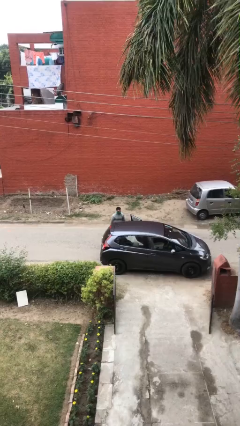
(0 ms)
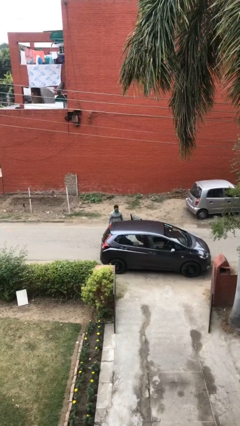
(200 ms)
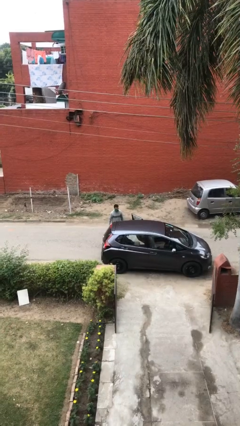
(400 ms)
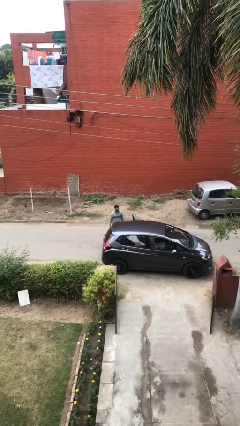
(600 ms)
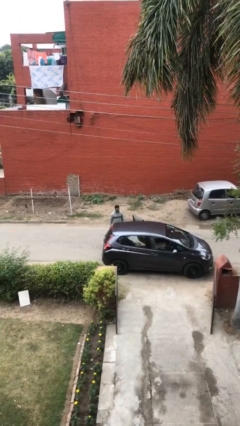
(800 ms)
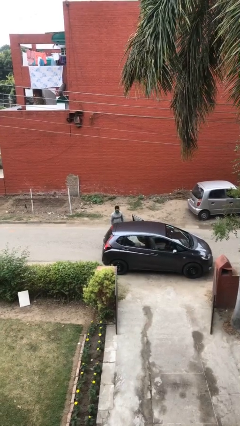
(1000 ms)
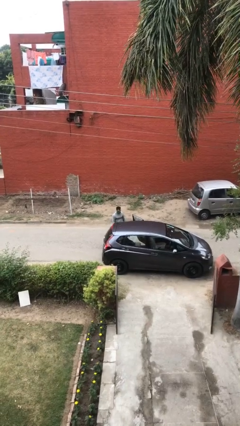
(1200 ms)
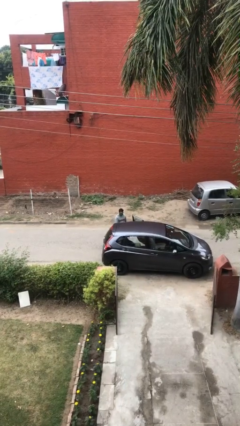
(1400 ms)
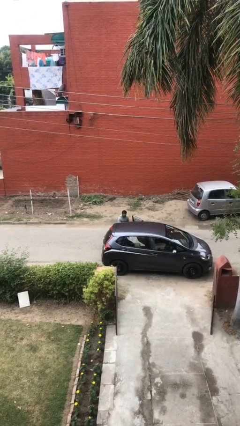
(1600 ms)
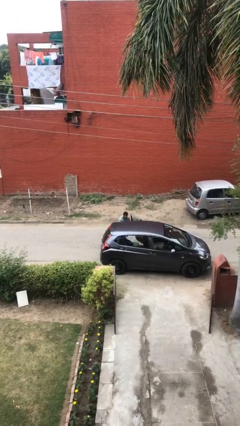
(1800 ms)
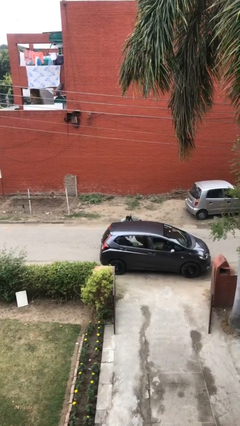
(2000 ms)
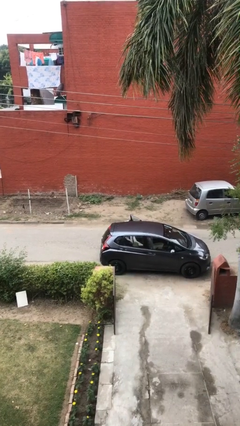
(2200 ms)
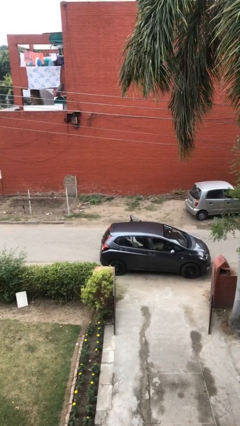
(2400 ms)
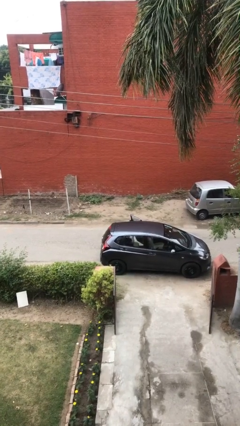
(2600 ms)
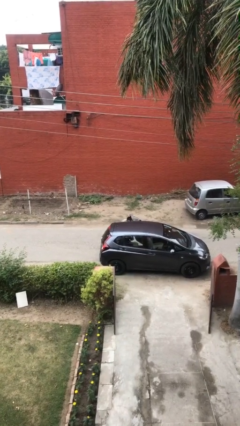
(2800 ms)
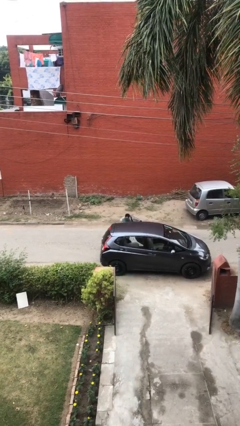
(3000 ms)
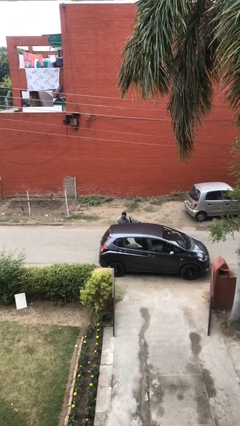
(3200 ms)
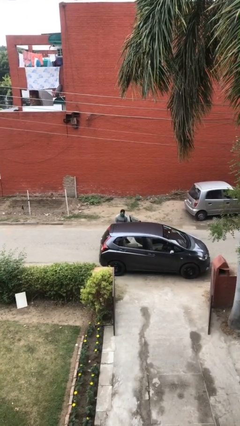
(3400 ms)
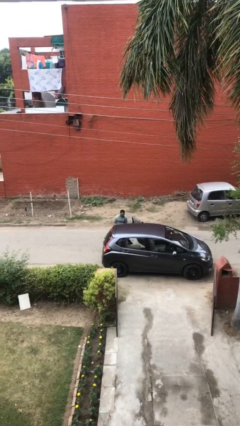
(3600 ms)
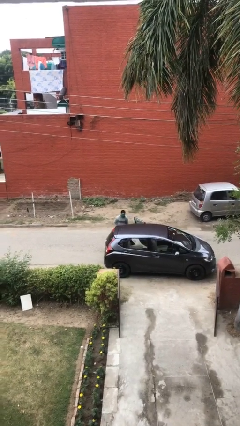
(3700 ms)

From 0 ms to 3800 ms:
person unloads car

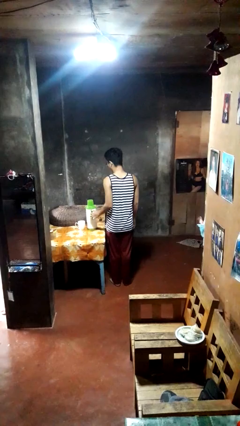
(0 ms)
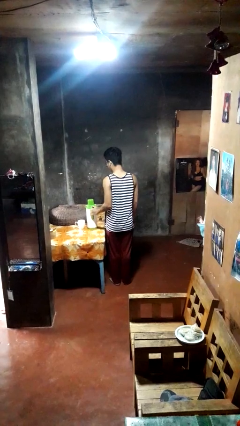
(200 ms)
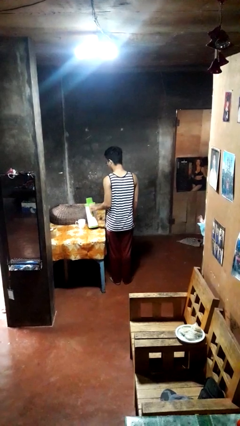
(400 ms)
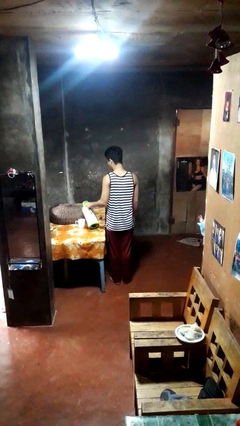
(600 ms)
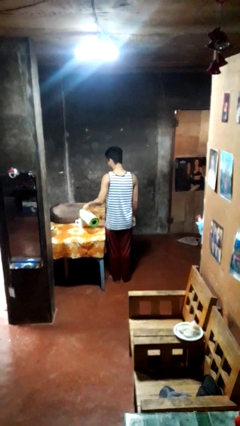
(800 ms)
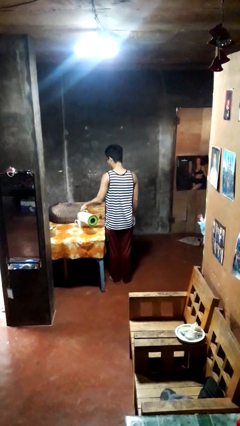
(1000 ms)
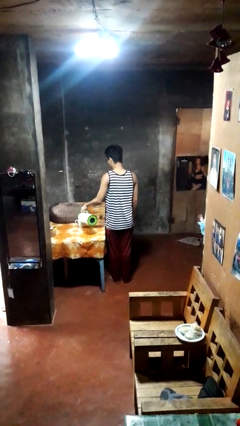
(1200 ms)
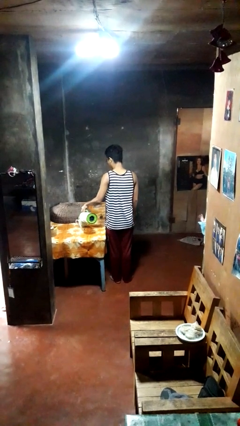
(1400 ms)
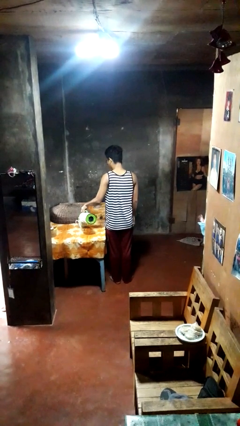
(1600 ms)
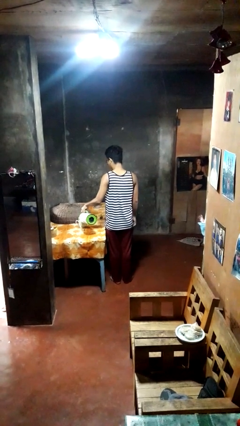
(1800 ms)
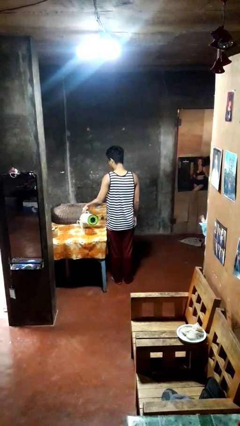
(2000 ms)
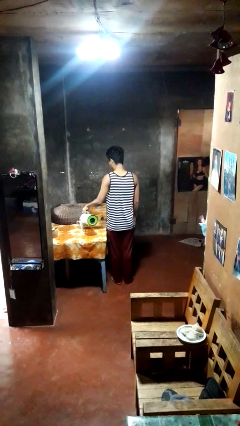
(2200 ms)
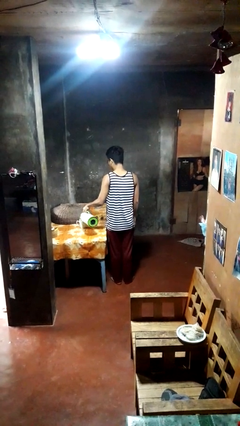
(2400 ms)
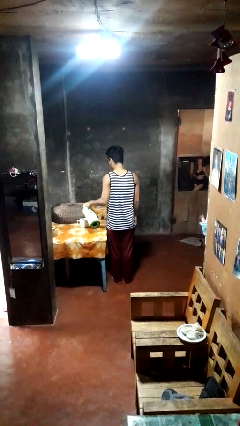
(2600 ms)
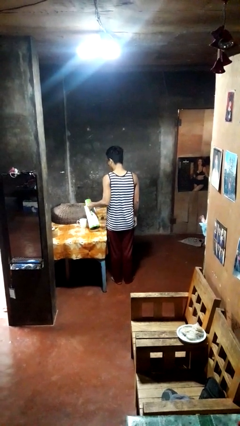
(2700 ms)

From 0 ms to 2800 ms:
person pours coffee into mug

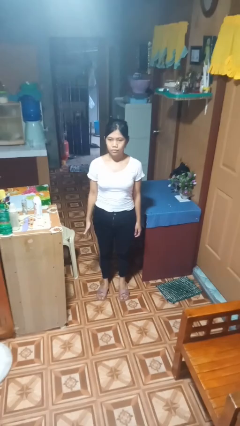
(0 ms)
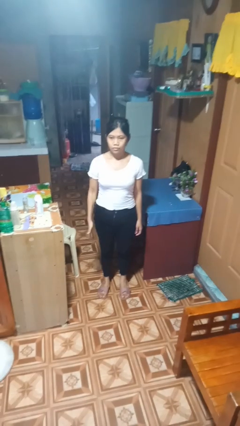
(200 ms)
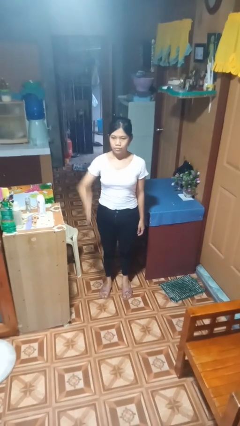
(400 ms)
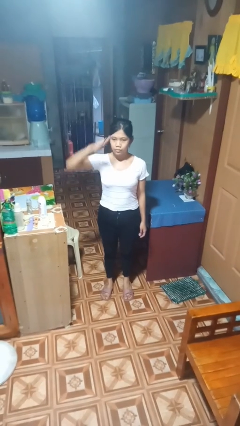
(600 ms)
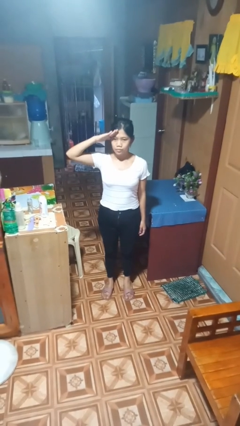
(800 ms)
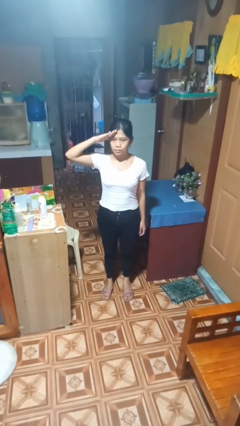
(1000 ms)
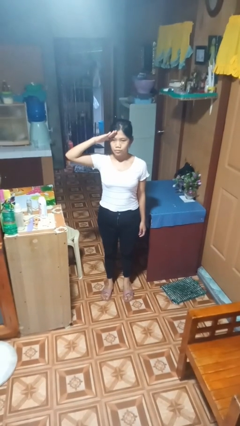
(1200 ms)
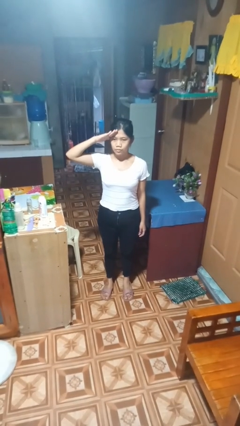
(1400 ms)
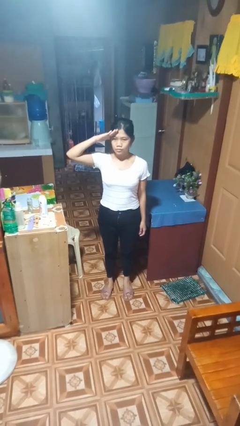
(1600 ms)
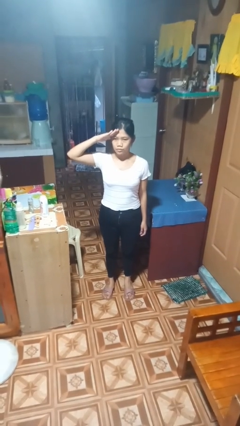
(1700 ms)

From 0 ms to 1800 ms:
person salutes

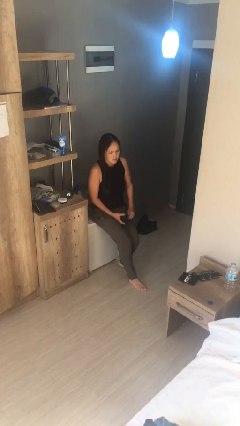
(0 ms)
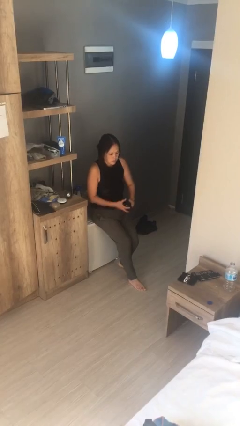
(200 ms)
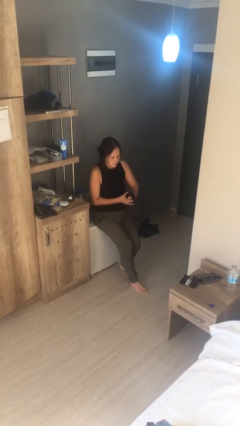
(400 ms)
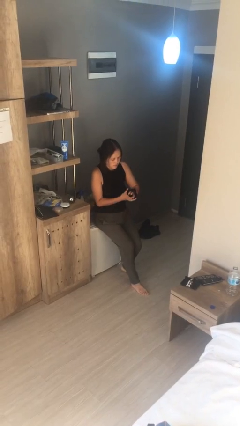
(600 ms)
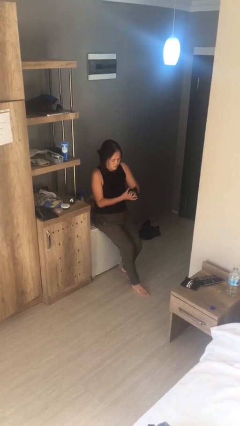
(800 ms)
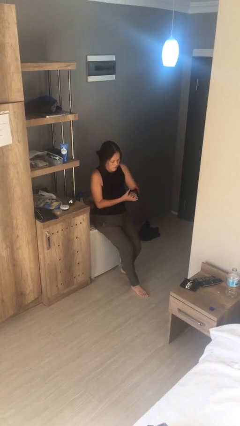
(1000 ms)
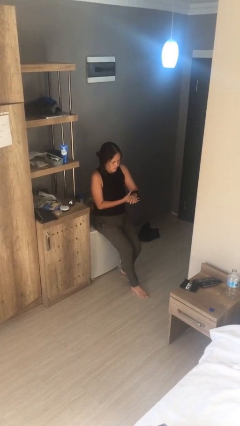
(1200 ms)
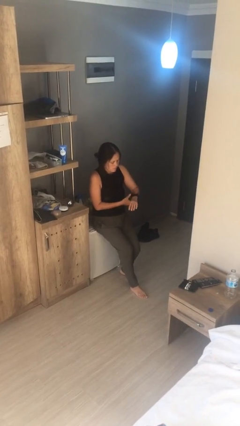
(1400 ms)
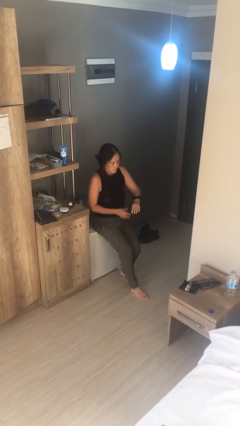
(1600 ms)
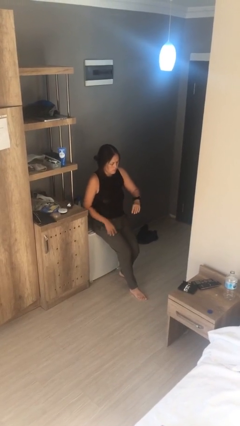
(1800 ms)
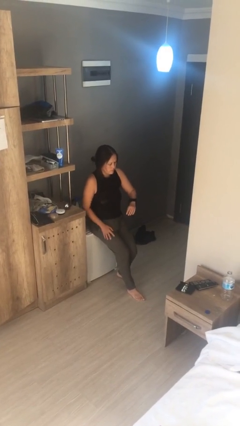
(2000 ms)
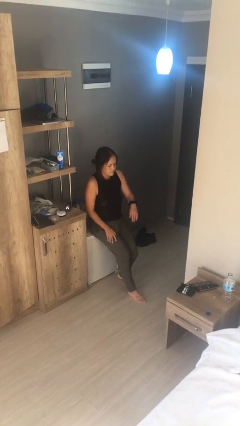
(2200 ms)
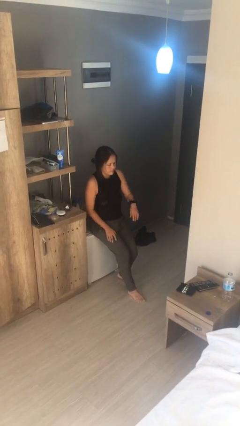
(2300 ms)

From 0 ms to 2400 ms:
person puts on wristwatch

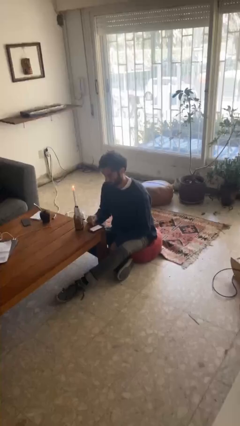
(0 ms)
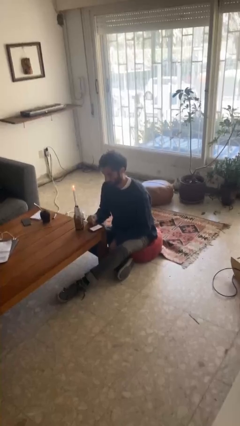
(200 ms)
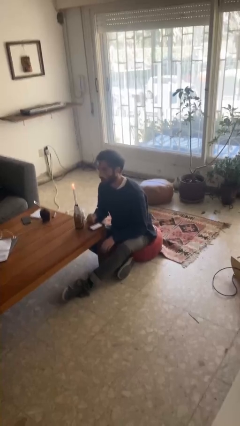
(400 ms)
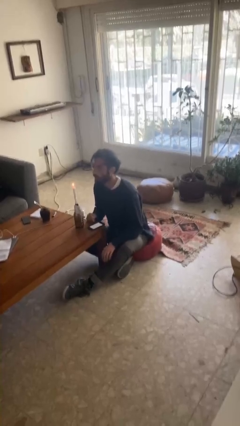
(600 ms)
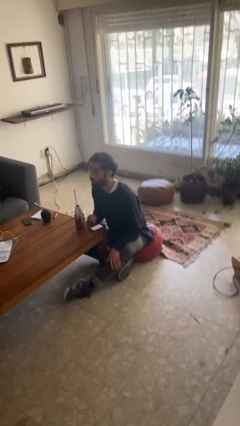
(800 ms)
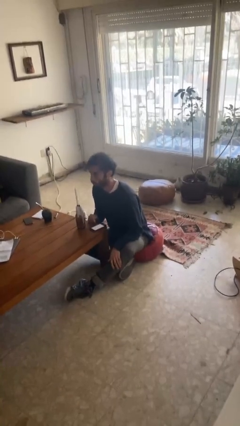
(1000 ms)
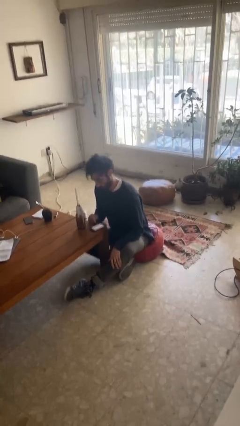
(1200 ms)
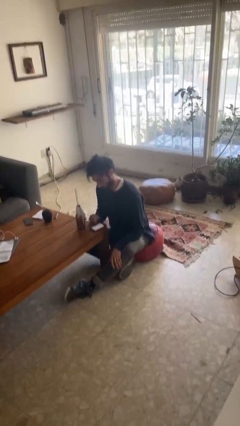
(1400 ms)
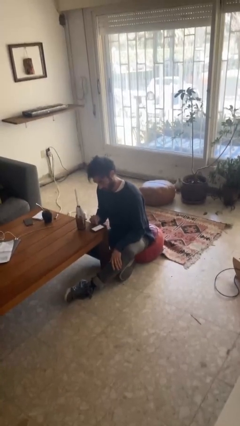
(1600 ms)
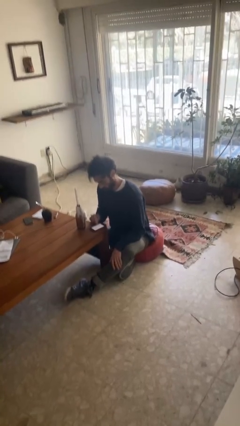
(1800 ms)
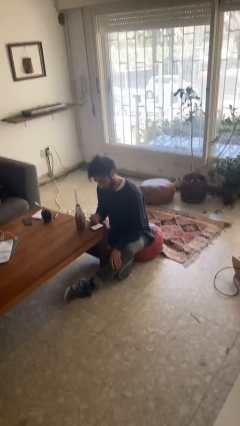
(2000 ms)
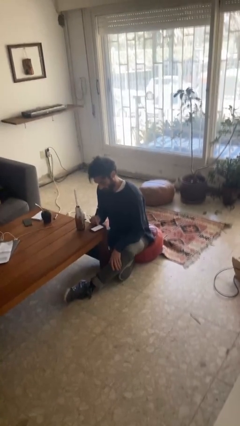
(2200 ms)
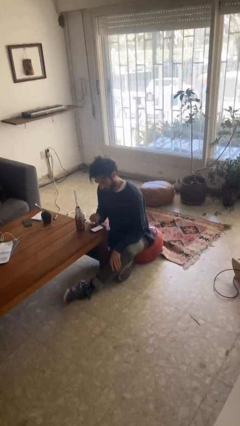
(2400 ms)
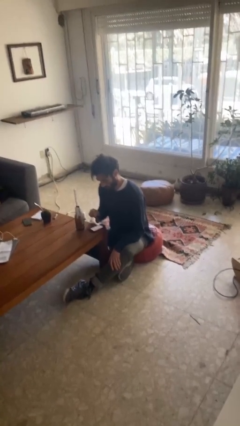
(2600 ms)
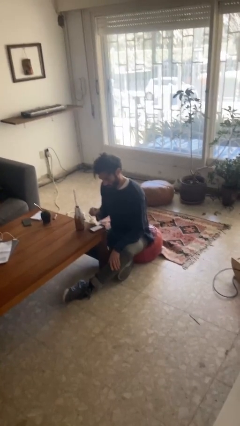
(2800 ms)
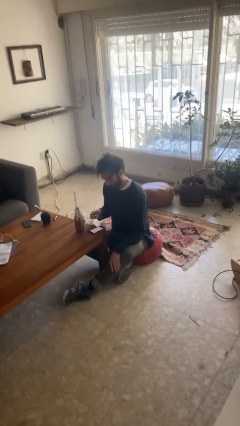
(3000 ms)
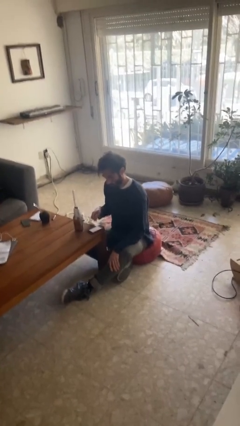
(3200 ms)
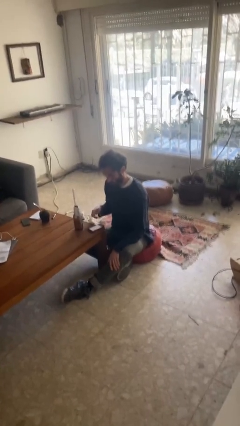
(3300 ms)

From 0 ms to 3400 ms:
person extinguishes candle

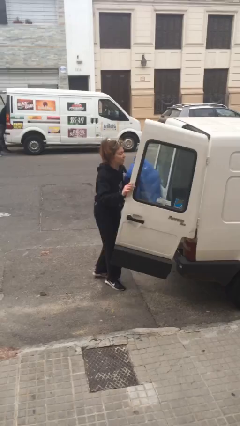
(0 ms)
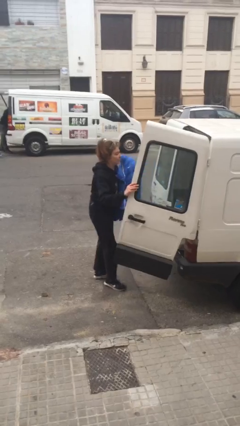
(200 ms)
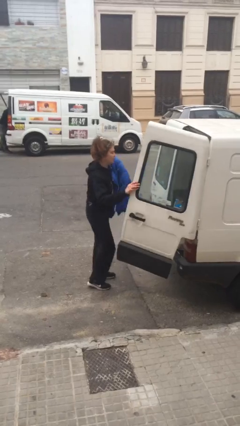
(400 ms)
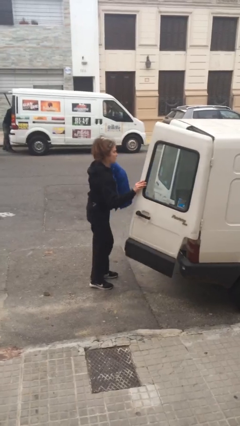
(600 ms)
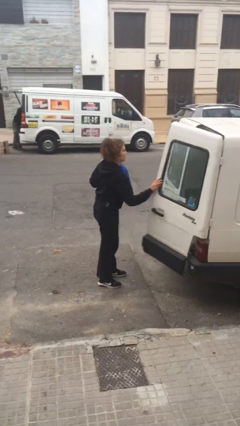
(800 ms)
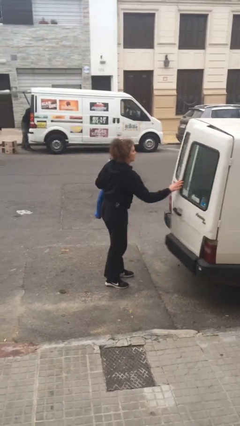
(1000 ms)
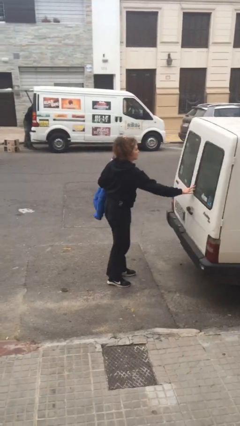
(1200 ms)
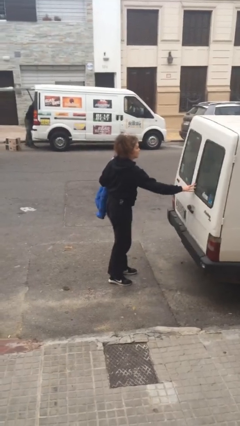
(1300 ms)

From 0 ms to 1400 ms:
person closes car door

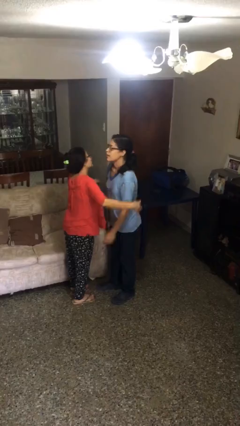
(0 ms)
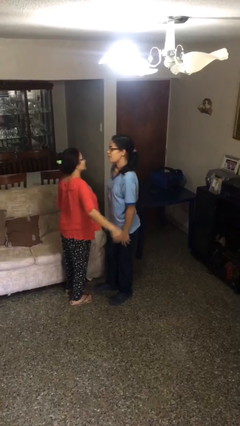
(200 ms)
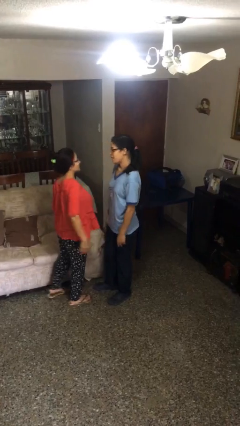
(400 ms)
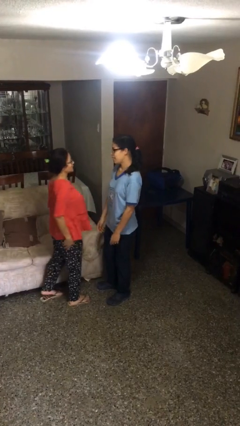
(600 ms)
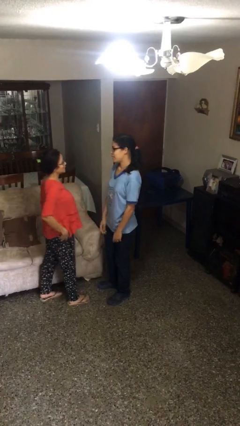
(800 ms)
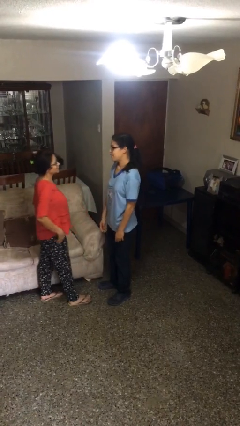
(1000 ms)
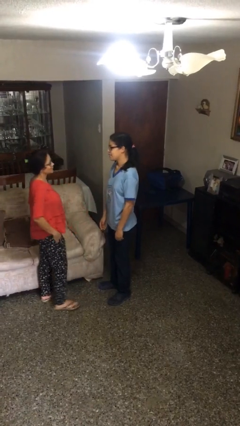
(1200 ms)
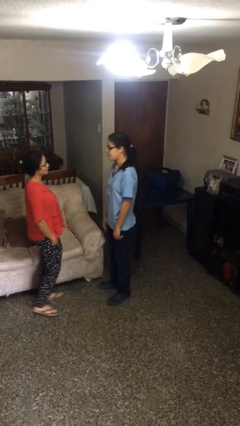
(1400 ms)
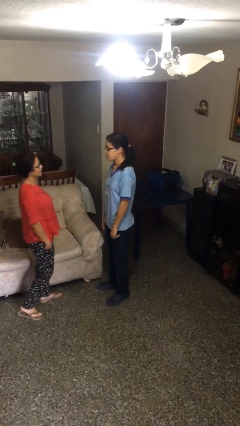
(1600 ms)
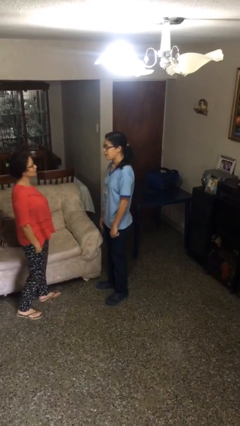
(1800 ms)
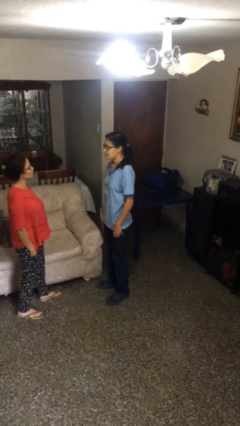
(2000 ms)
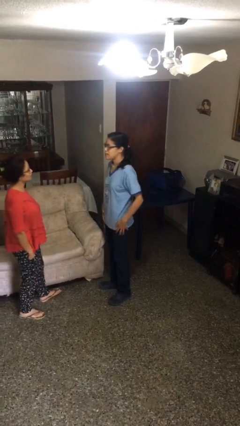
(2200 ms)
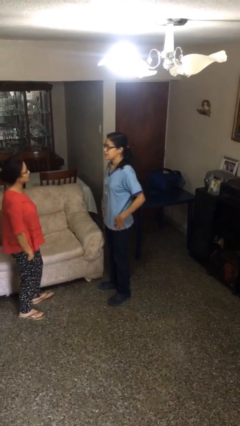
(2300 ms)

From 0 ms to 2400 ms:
person talks to person
